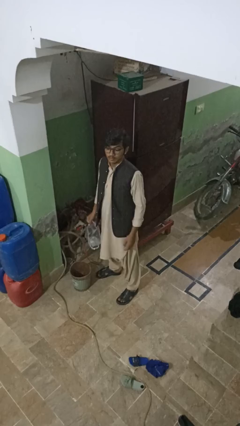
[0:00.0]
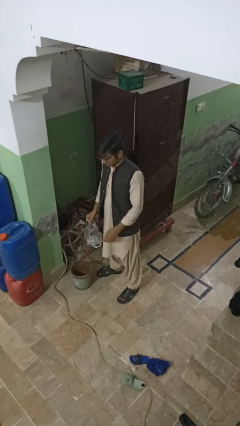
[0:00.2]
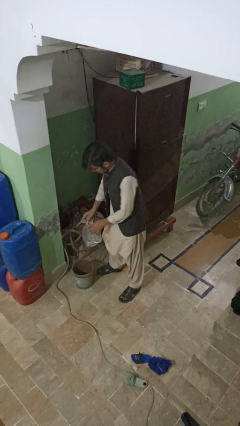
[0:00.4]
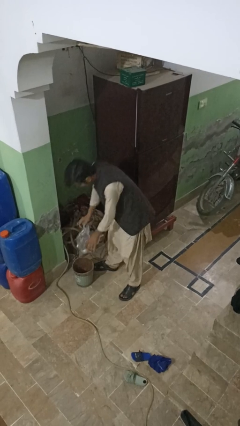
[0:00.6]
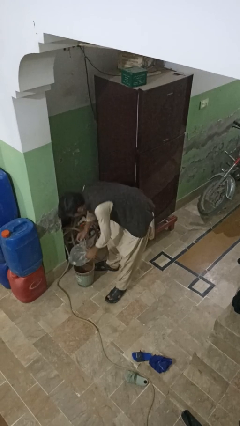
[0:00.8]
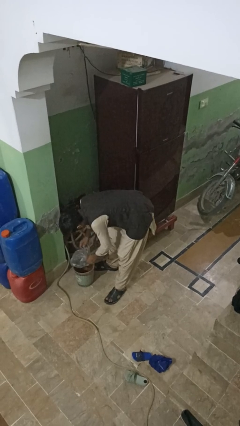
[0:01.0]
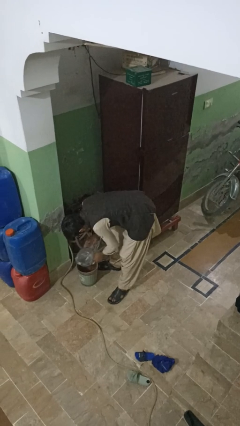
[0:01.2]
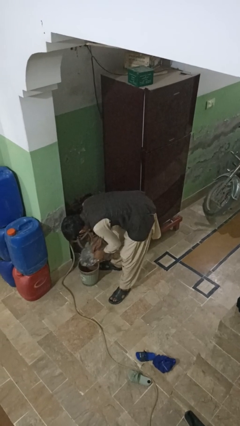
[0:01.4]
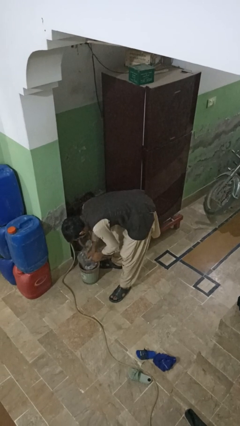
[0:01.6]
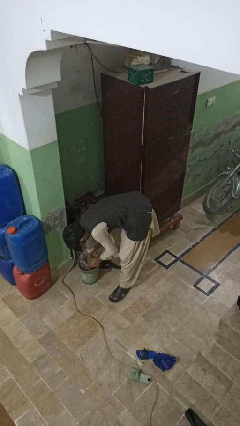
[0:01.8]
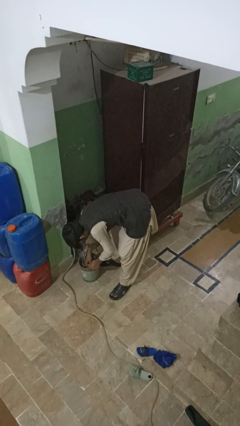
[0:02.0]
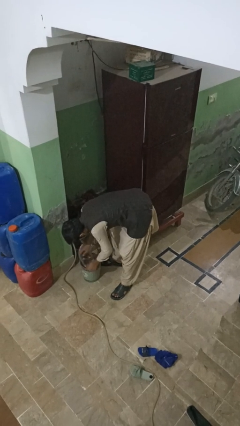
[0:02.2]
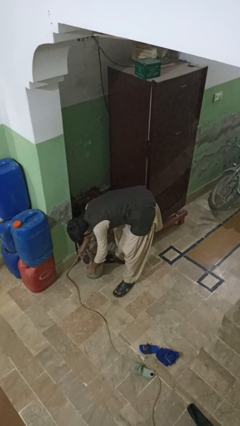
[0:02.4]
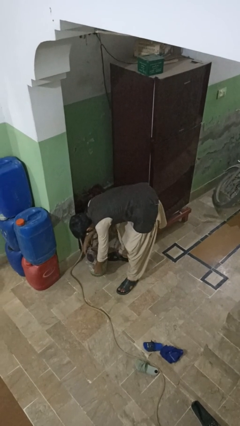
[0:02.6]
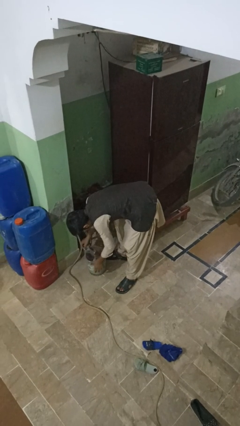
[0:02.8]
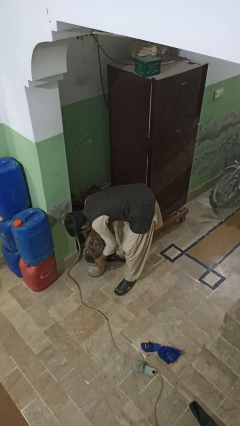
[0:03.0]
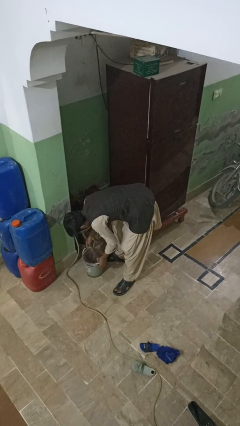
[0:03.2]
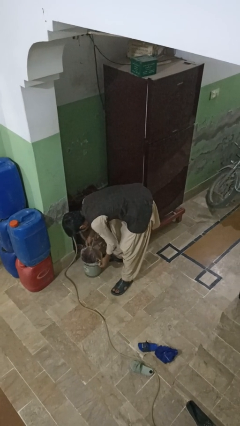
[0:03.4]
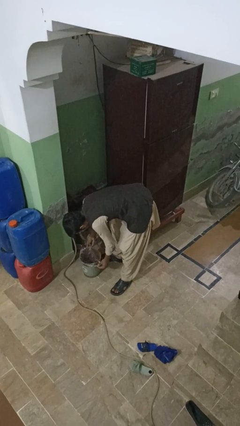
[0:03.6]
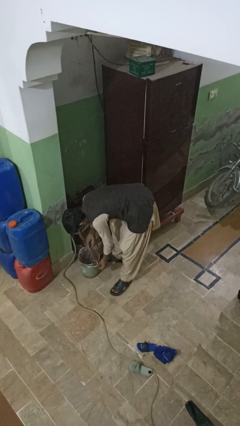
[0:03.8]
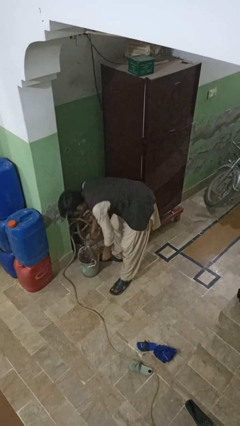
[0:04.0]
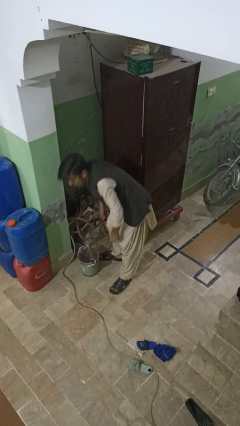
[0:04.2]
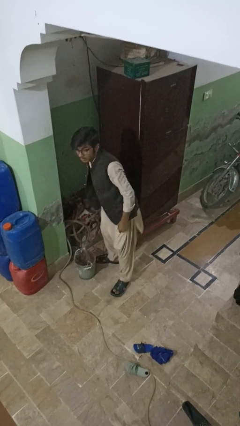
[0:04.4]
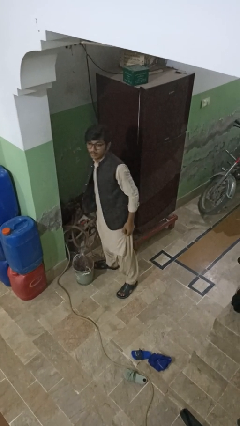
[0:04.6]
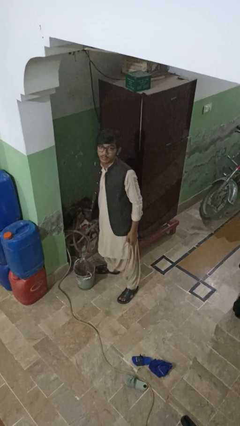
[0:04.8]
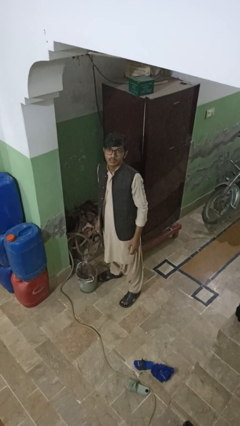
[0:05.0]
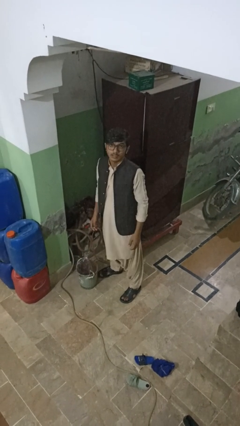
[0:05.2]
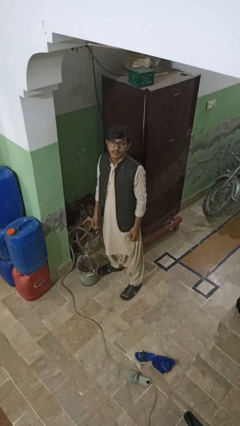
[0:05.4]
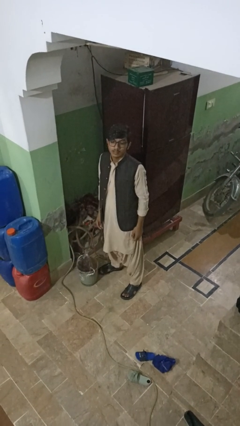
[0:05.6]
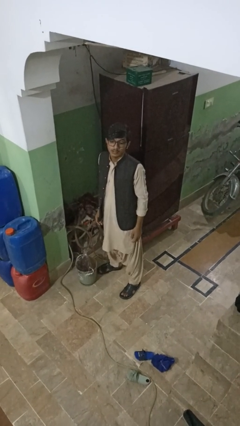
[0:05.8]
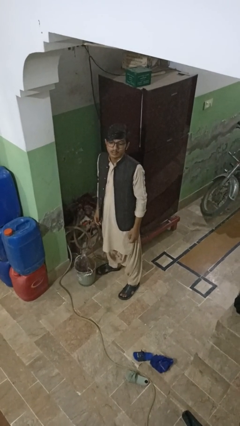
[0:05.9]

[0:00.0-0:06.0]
person inserts trashbag into trashcan

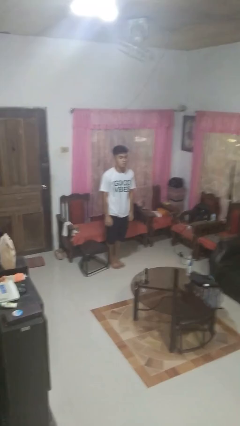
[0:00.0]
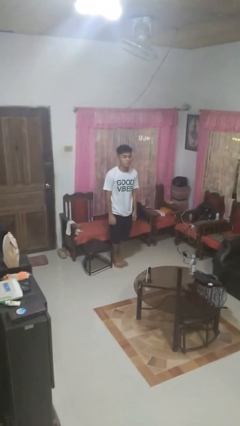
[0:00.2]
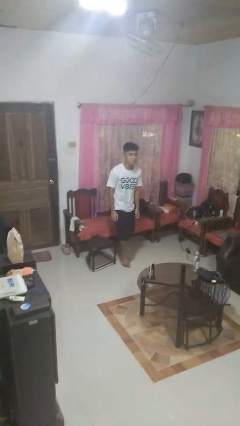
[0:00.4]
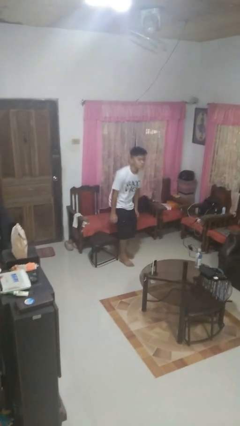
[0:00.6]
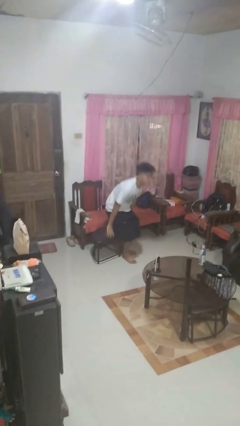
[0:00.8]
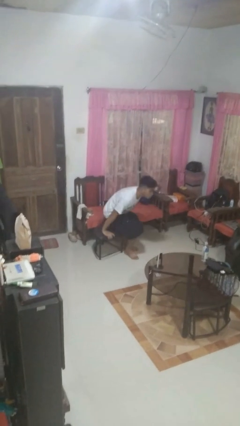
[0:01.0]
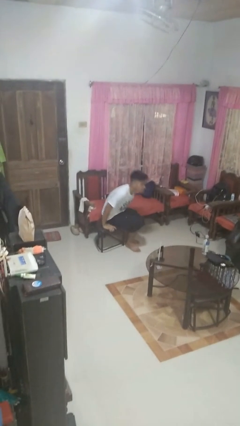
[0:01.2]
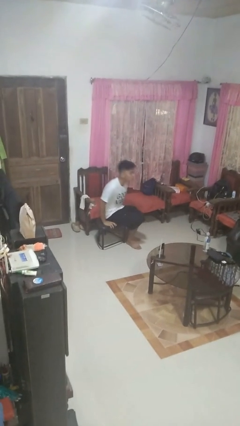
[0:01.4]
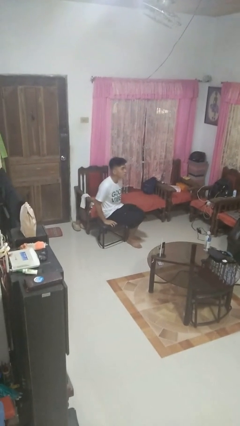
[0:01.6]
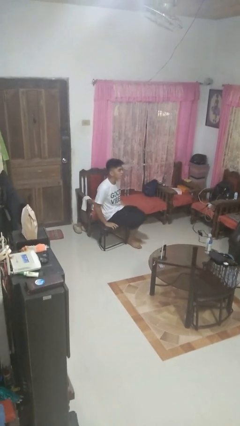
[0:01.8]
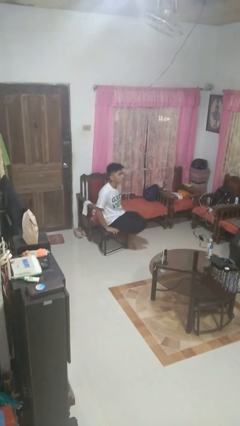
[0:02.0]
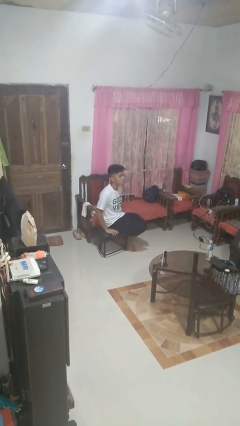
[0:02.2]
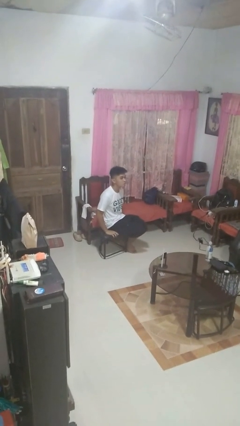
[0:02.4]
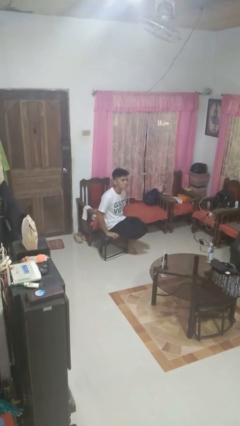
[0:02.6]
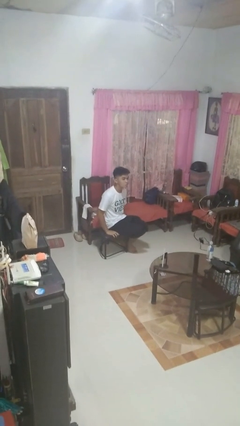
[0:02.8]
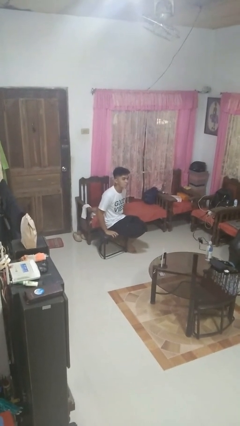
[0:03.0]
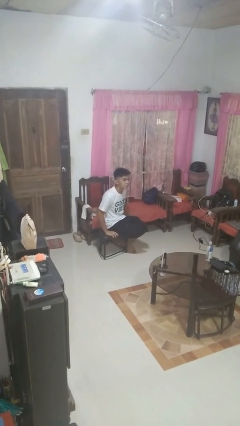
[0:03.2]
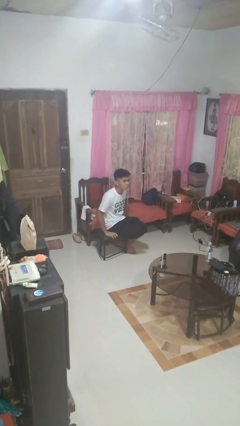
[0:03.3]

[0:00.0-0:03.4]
person sits down

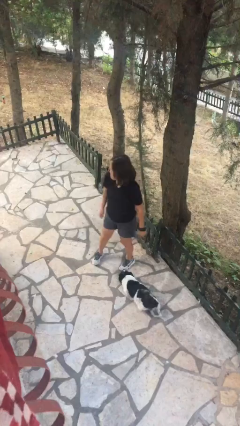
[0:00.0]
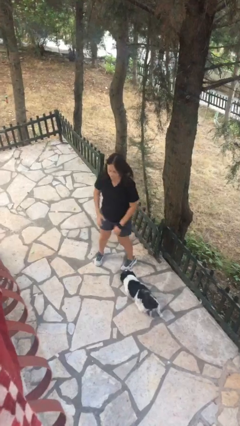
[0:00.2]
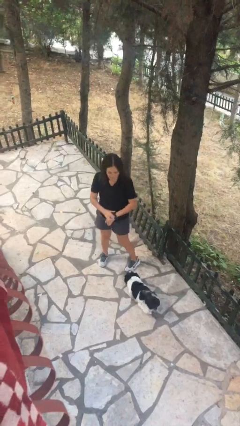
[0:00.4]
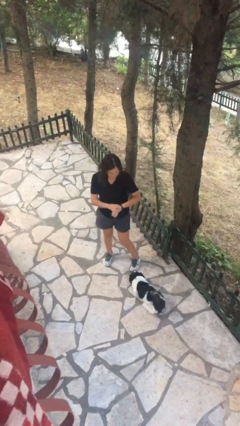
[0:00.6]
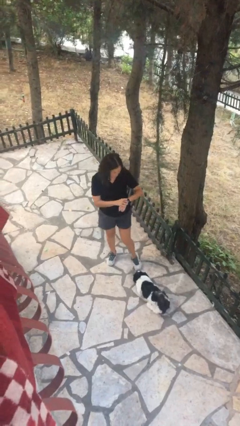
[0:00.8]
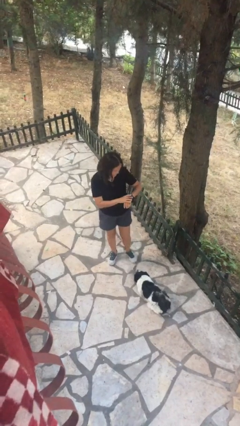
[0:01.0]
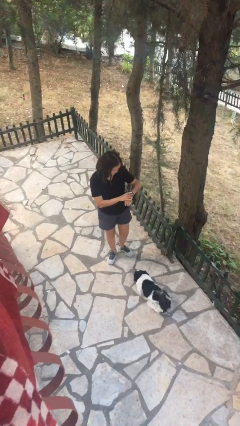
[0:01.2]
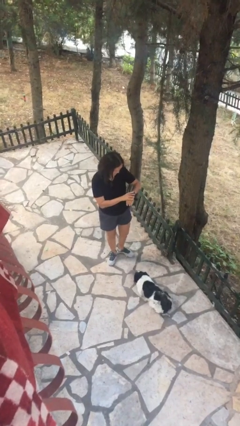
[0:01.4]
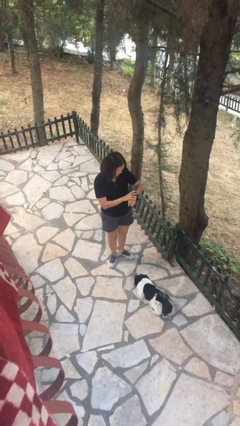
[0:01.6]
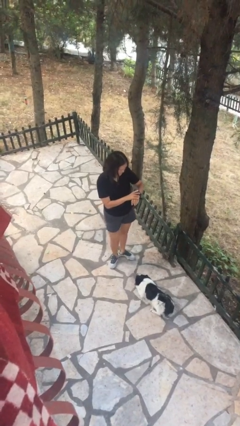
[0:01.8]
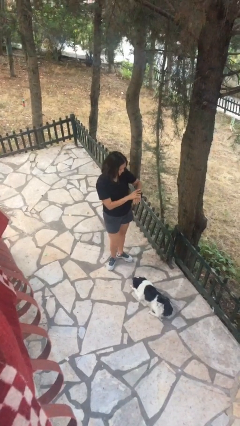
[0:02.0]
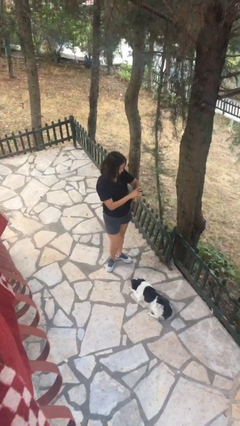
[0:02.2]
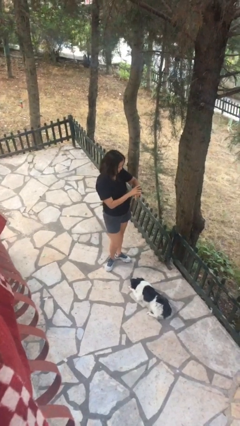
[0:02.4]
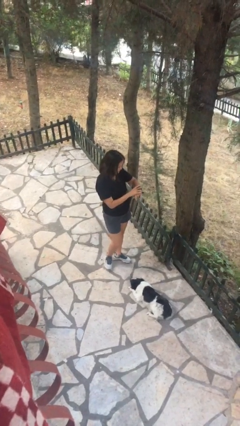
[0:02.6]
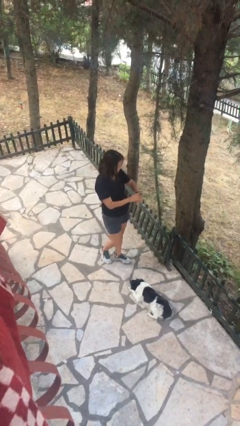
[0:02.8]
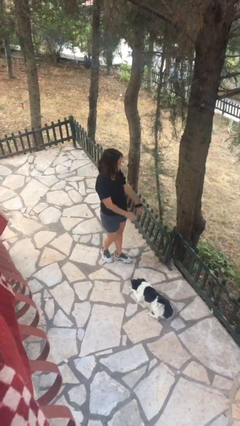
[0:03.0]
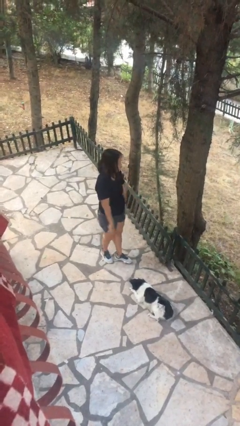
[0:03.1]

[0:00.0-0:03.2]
person looks at wristwatch

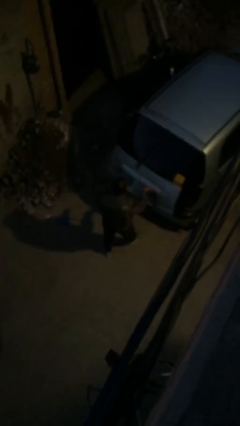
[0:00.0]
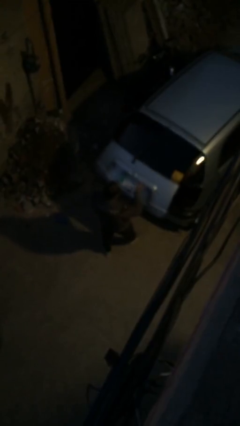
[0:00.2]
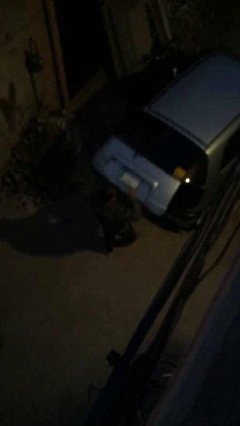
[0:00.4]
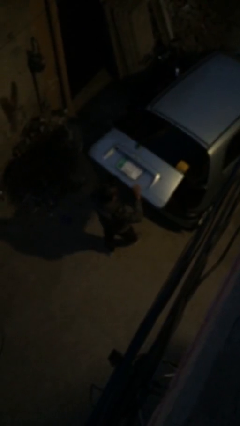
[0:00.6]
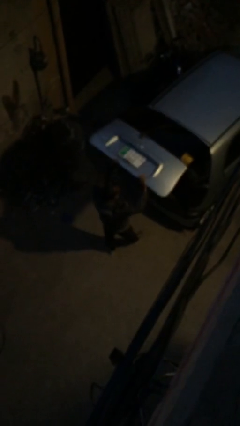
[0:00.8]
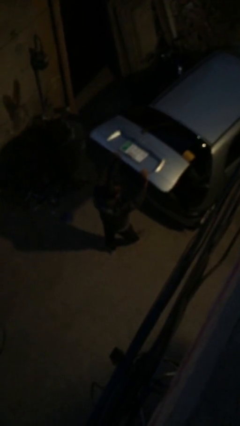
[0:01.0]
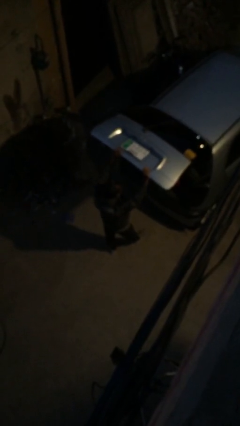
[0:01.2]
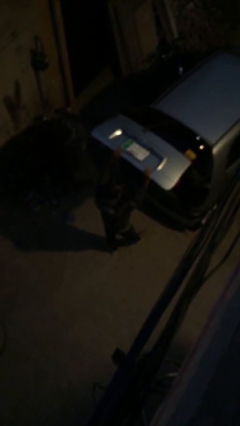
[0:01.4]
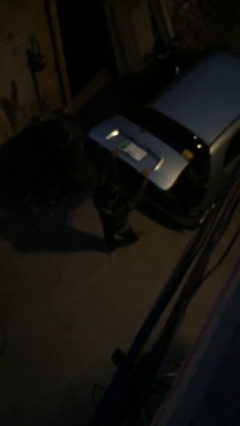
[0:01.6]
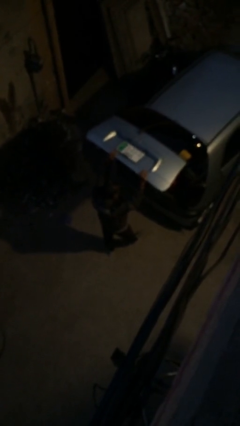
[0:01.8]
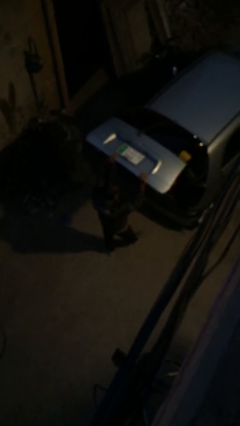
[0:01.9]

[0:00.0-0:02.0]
person opens car trunk

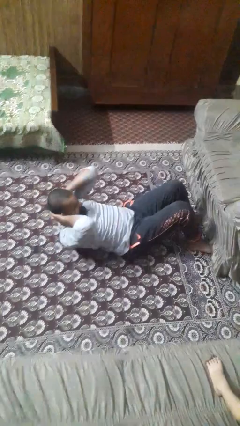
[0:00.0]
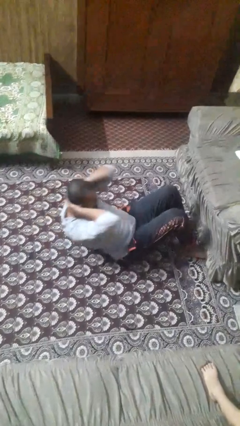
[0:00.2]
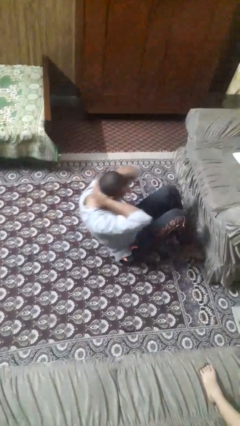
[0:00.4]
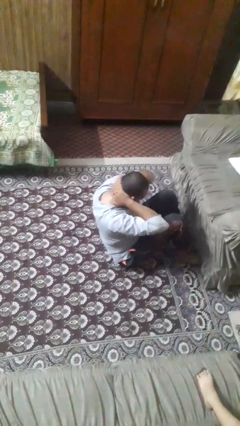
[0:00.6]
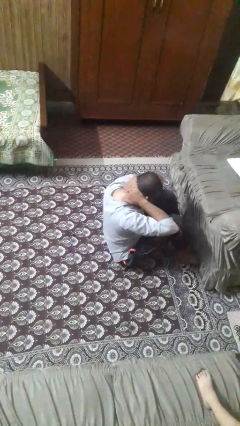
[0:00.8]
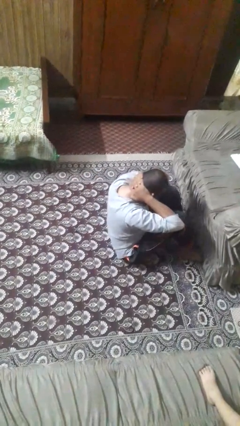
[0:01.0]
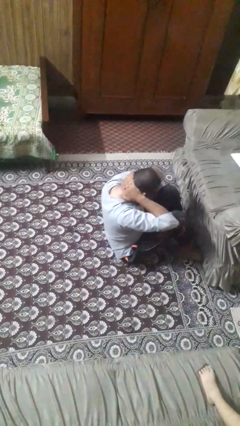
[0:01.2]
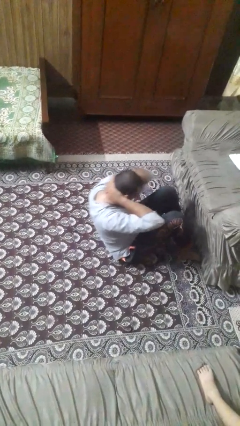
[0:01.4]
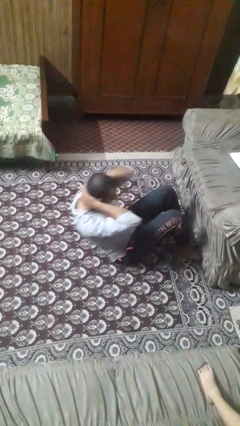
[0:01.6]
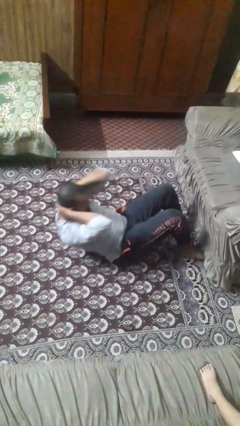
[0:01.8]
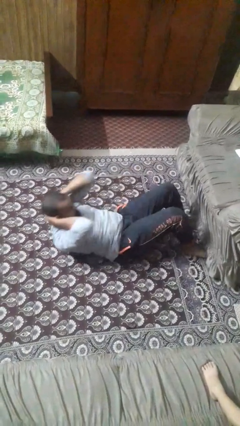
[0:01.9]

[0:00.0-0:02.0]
person exercises with situp

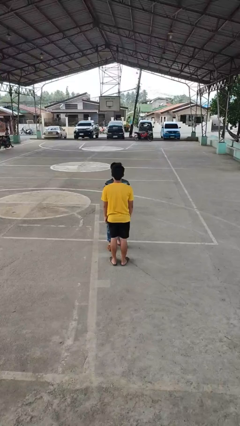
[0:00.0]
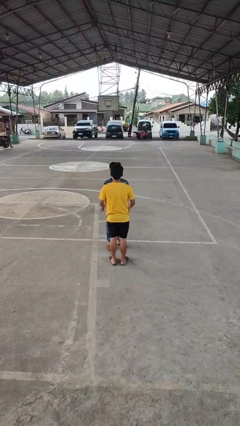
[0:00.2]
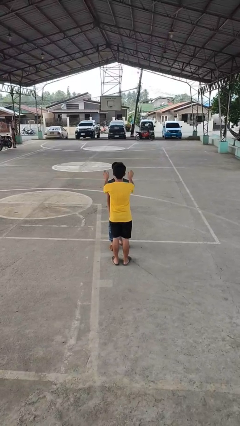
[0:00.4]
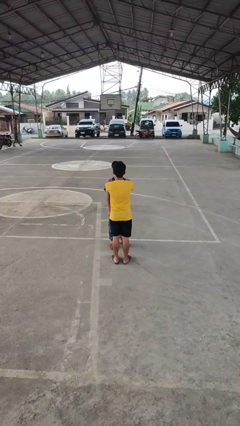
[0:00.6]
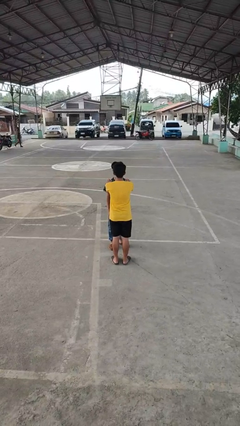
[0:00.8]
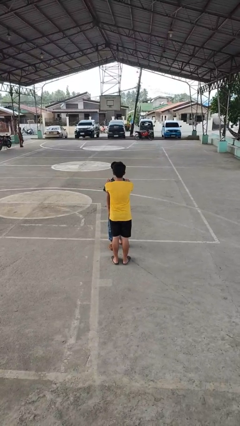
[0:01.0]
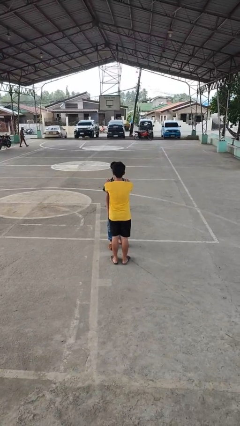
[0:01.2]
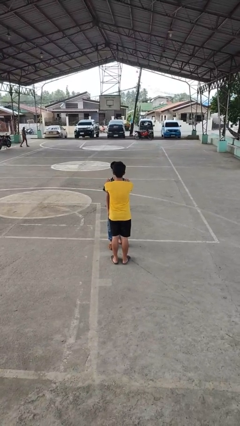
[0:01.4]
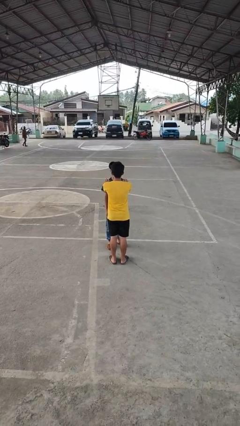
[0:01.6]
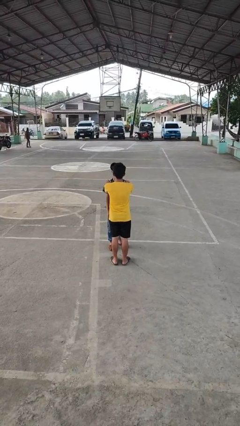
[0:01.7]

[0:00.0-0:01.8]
person grabs person by shoulder
